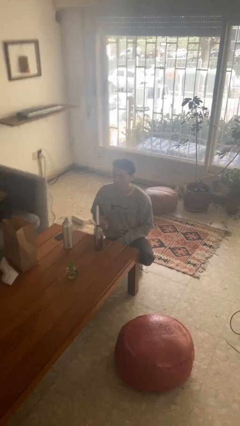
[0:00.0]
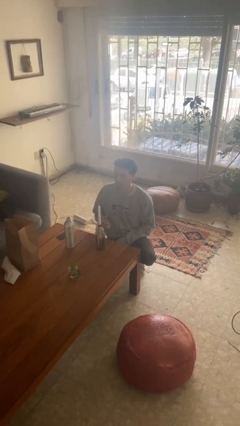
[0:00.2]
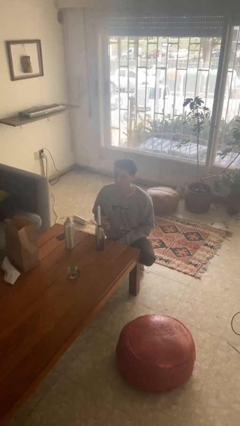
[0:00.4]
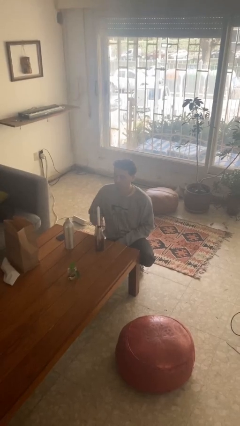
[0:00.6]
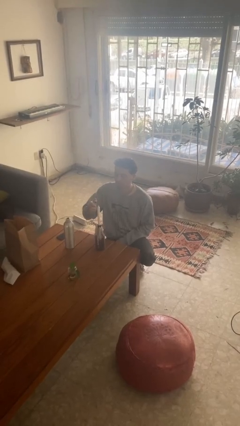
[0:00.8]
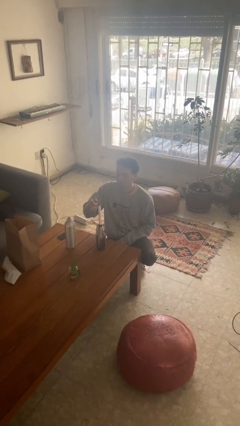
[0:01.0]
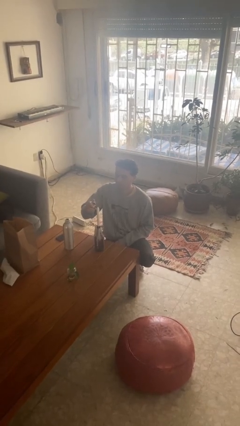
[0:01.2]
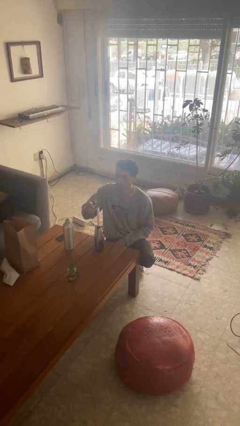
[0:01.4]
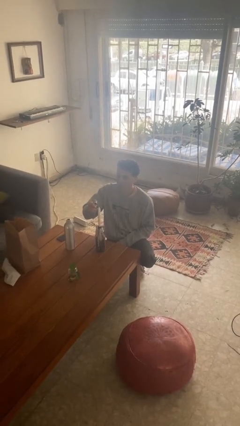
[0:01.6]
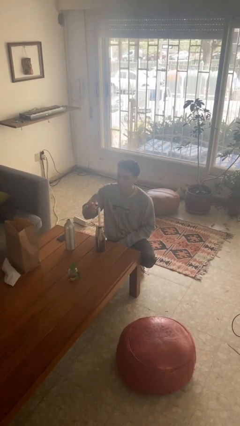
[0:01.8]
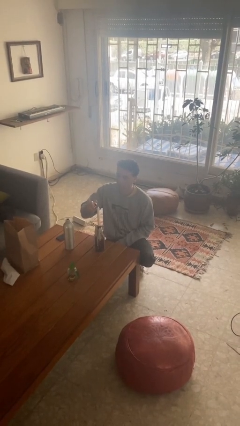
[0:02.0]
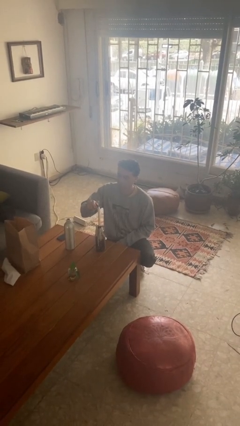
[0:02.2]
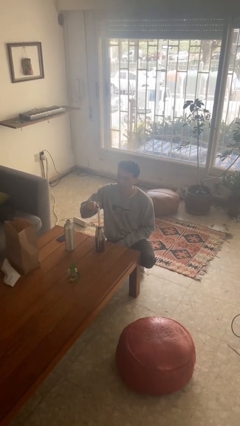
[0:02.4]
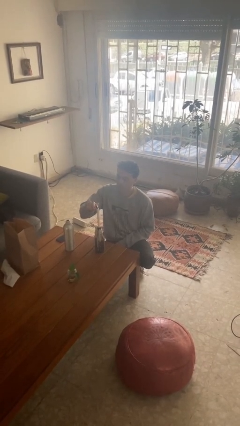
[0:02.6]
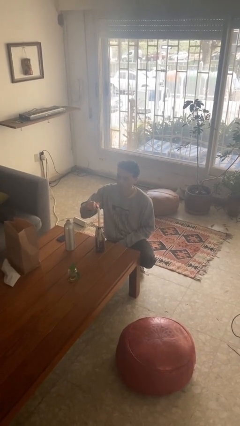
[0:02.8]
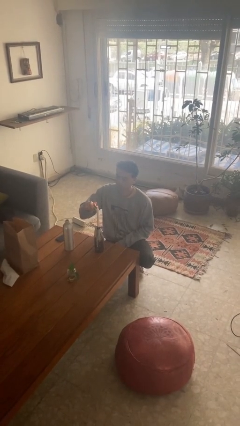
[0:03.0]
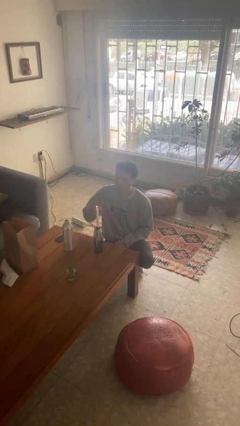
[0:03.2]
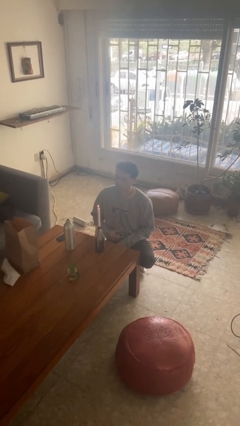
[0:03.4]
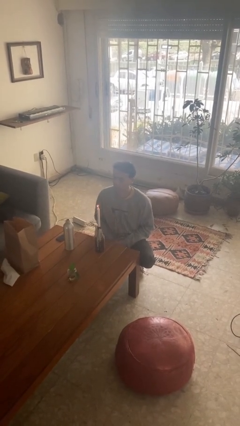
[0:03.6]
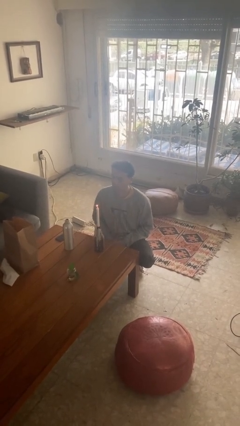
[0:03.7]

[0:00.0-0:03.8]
person lights candle

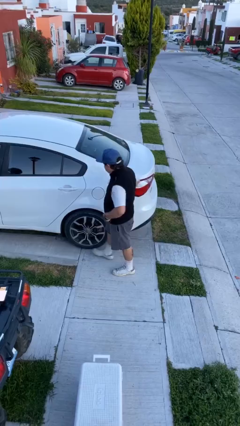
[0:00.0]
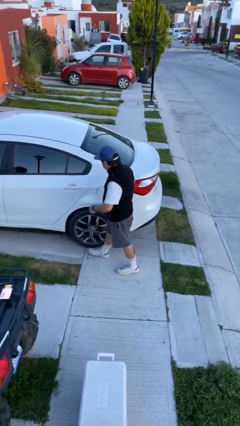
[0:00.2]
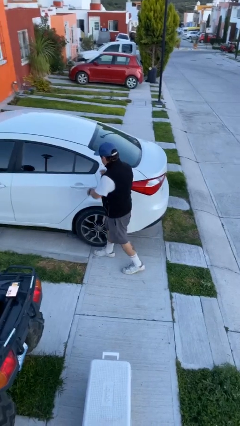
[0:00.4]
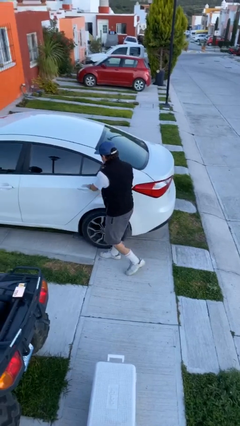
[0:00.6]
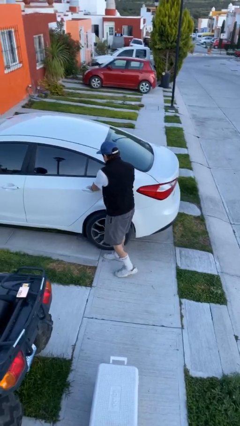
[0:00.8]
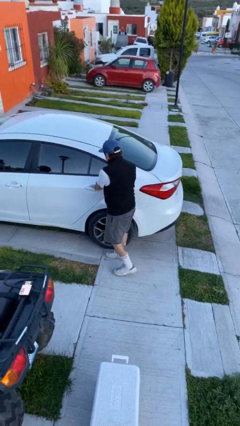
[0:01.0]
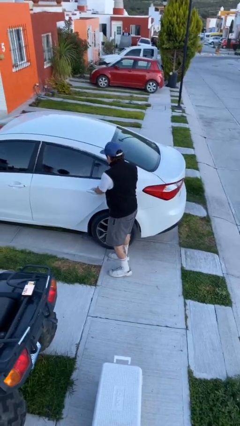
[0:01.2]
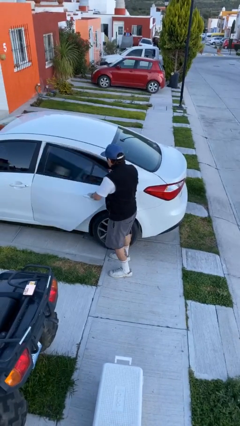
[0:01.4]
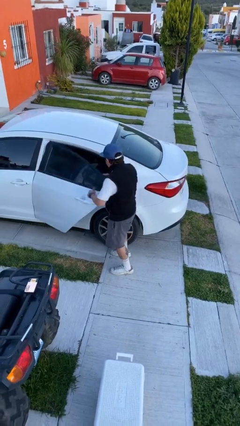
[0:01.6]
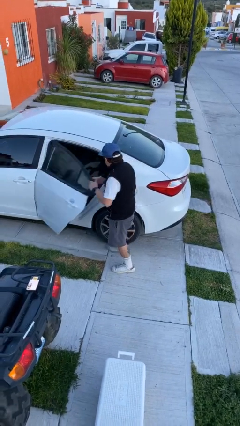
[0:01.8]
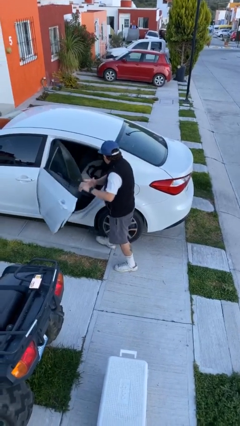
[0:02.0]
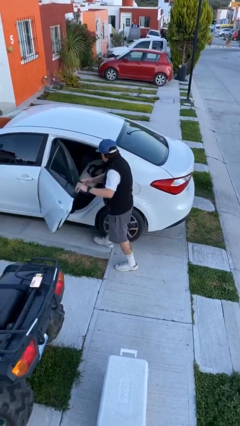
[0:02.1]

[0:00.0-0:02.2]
person opens car door

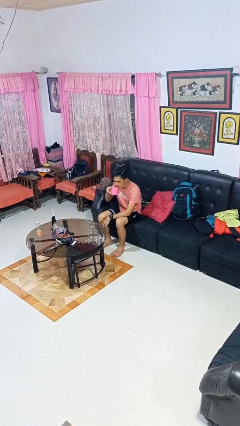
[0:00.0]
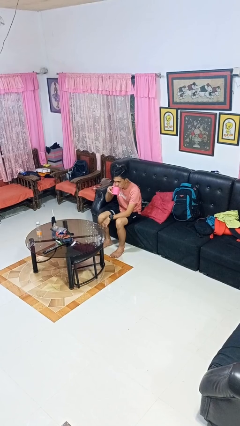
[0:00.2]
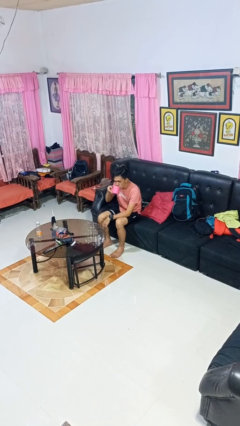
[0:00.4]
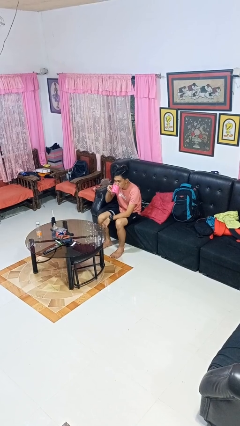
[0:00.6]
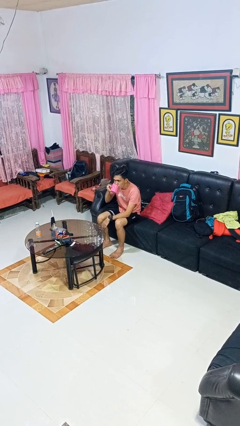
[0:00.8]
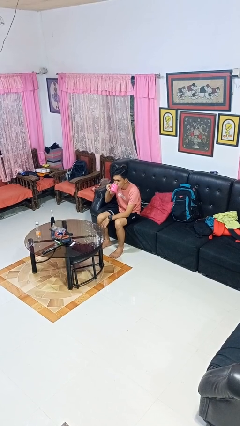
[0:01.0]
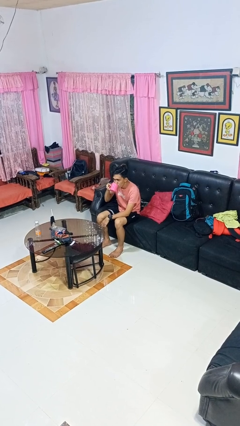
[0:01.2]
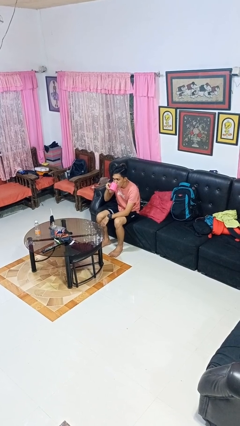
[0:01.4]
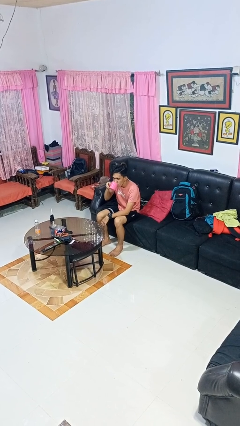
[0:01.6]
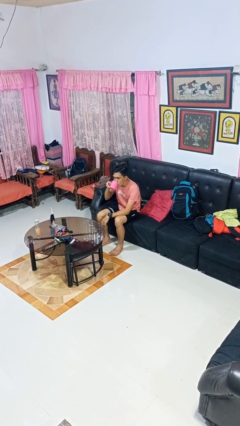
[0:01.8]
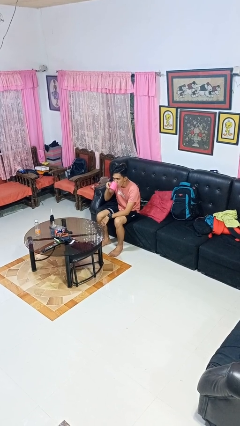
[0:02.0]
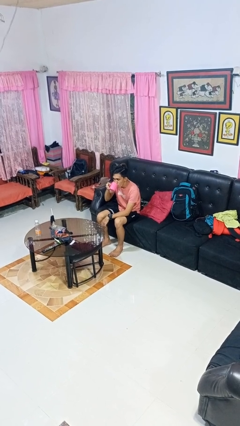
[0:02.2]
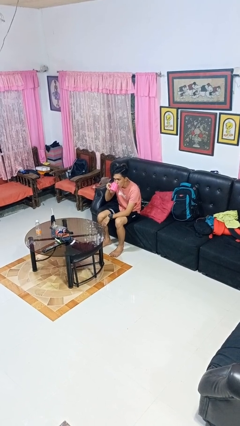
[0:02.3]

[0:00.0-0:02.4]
person drinks from mug

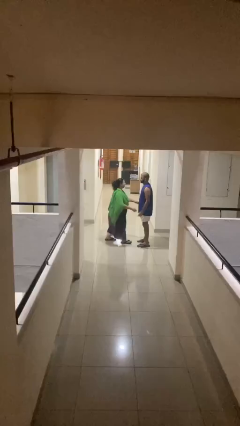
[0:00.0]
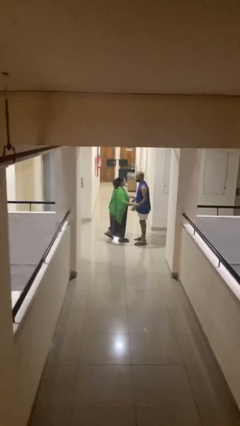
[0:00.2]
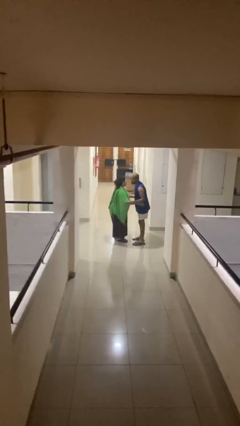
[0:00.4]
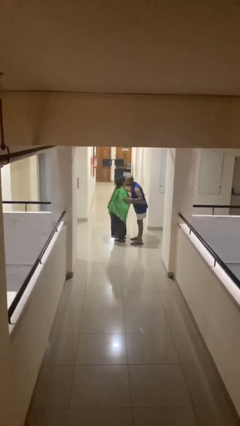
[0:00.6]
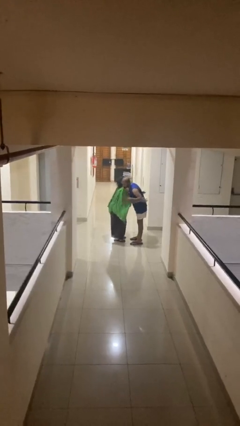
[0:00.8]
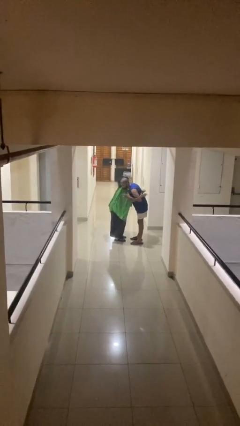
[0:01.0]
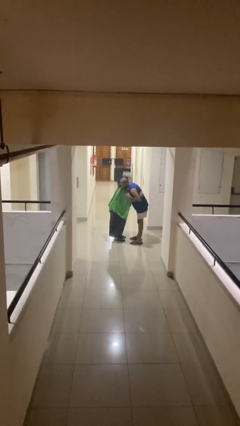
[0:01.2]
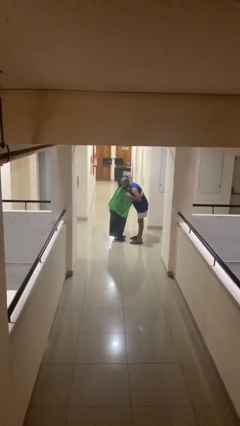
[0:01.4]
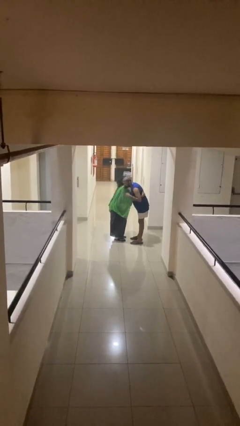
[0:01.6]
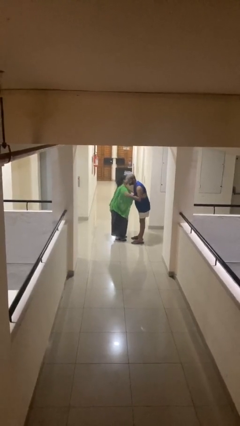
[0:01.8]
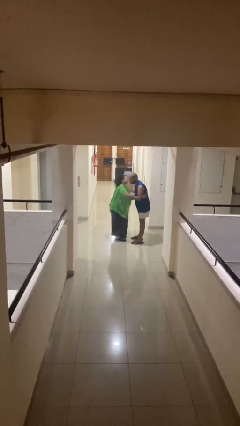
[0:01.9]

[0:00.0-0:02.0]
person embraces person

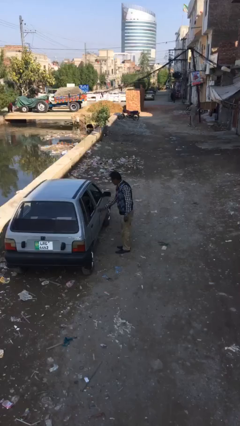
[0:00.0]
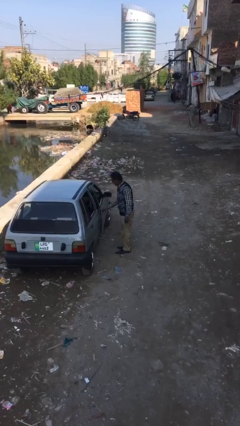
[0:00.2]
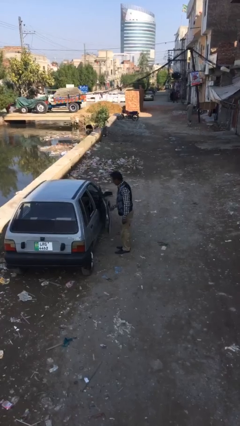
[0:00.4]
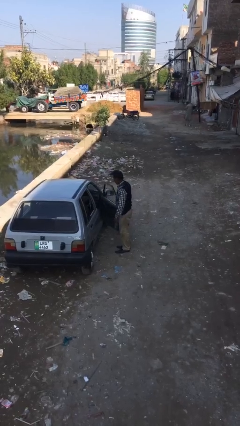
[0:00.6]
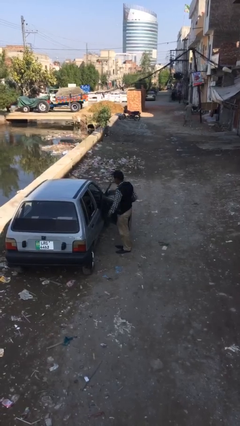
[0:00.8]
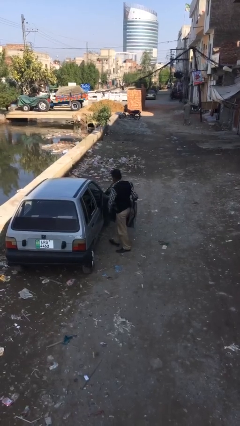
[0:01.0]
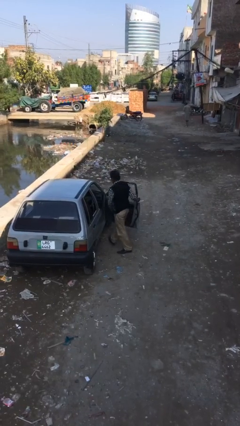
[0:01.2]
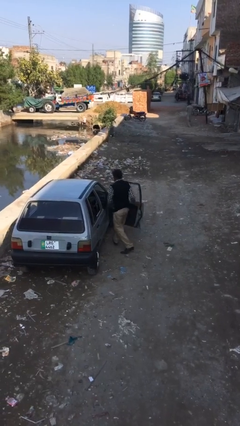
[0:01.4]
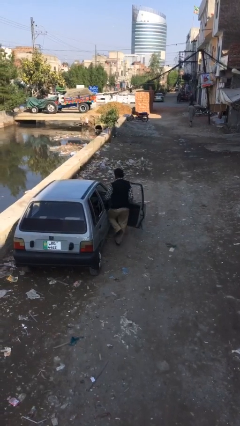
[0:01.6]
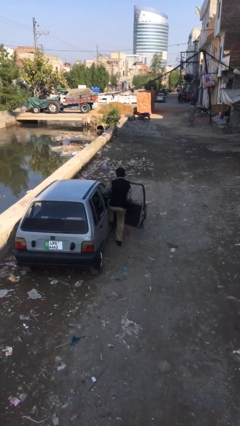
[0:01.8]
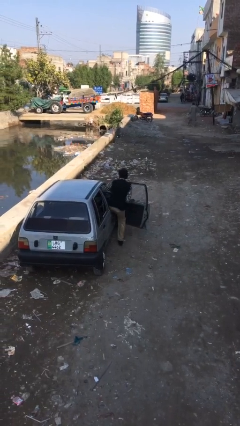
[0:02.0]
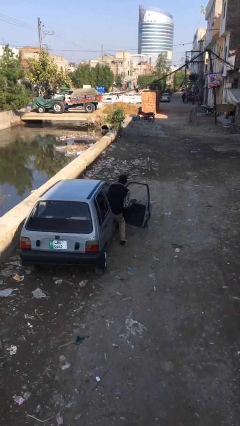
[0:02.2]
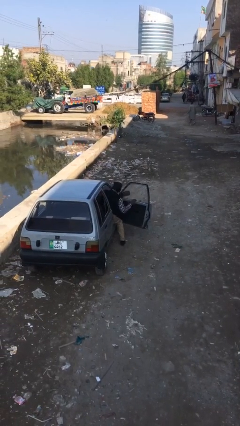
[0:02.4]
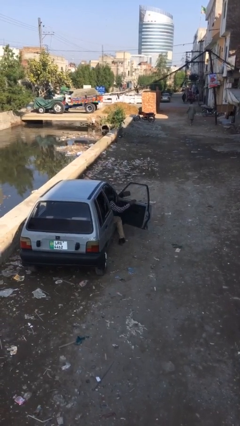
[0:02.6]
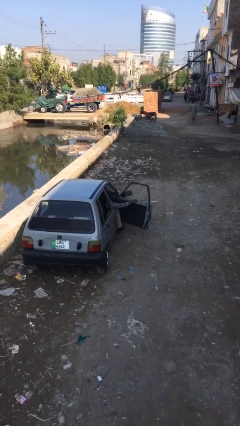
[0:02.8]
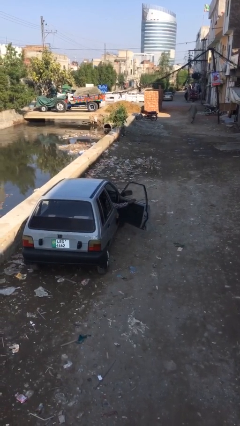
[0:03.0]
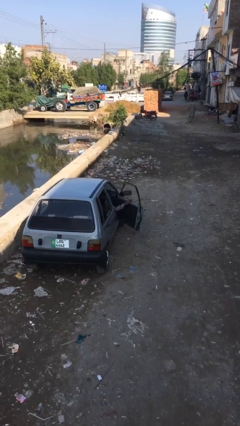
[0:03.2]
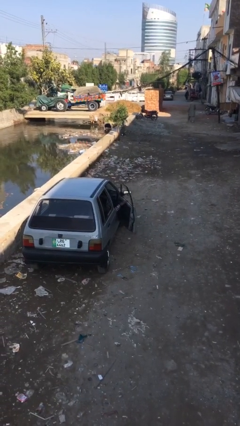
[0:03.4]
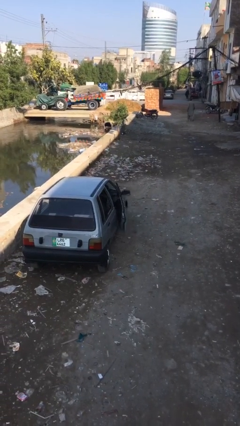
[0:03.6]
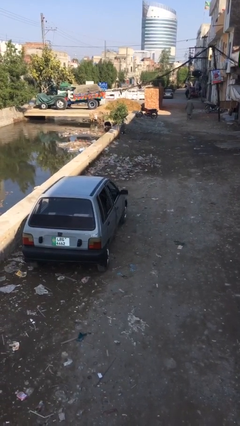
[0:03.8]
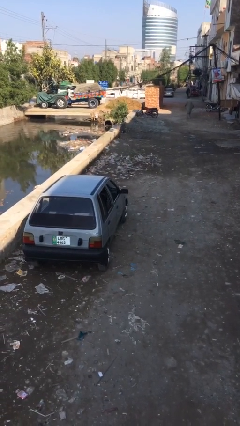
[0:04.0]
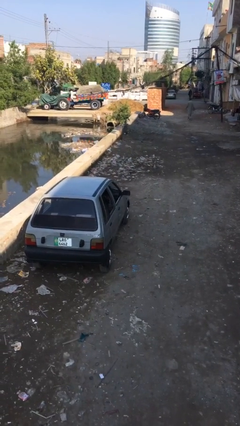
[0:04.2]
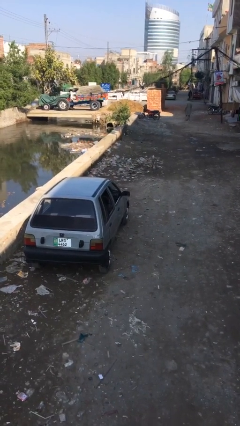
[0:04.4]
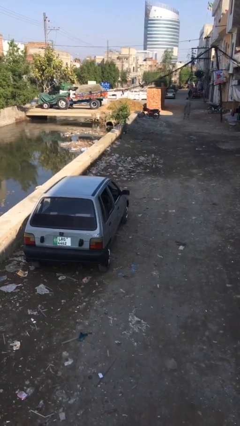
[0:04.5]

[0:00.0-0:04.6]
person enters car

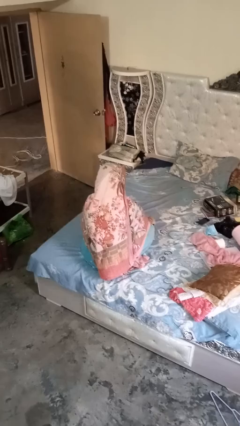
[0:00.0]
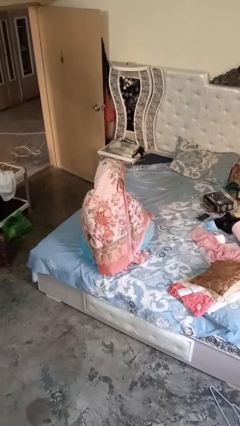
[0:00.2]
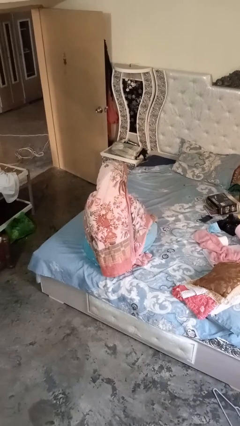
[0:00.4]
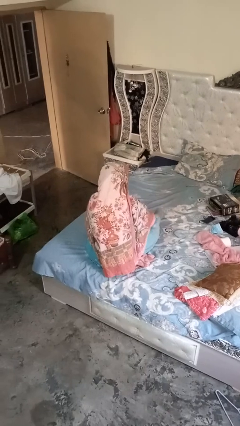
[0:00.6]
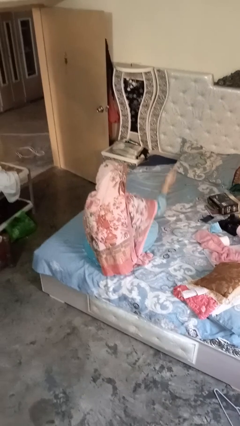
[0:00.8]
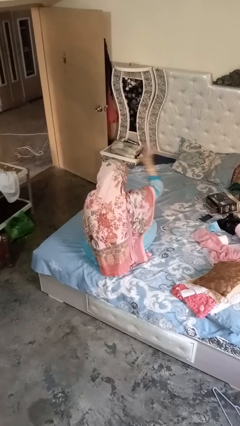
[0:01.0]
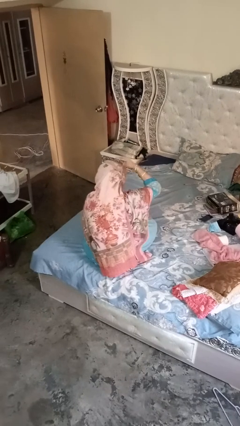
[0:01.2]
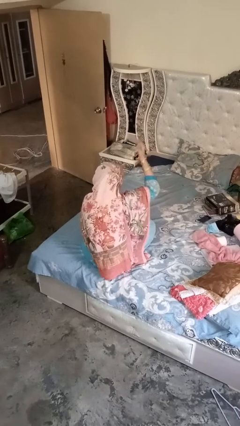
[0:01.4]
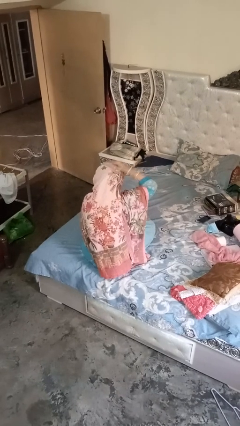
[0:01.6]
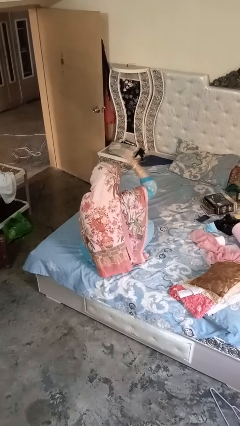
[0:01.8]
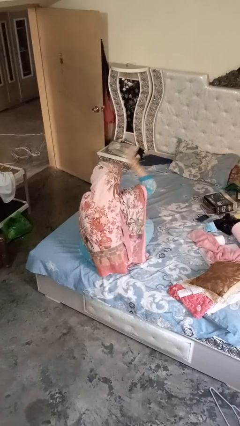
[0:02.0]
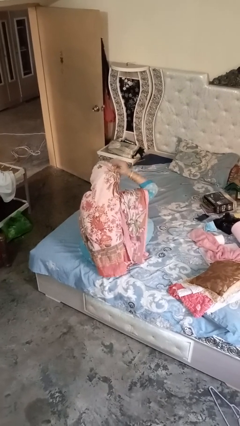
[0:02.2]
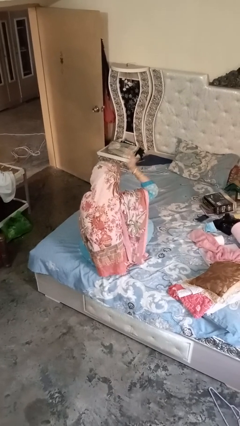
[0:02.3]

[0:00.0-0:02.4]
person pats head

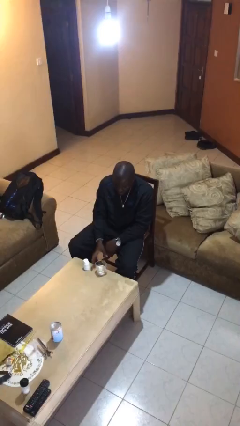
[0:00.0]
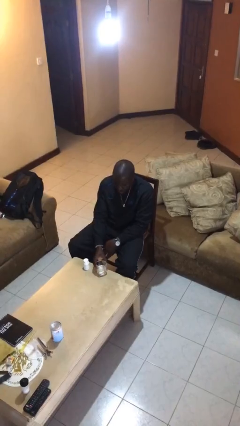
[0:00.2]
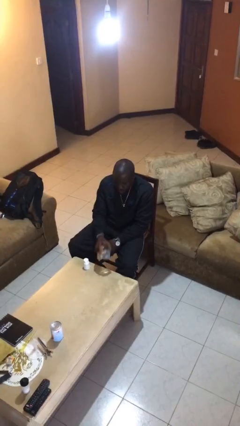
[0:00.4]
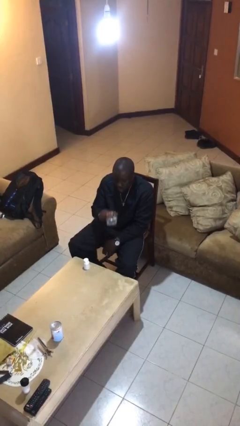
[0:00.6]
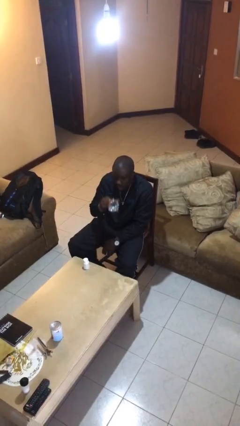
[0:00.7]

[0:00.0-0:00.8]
person drinks from cup
